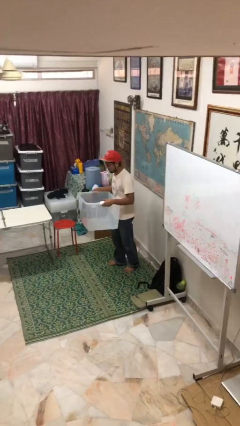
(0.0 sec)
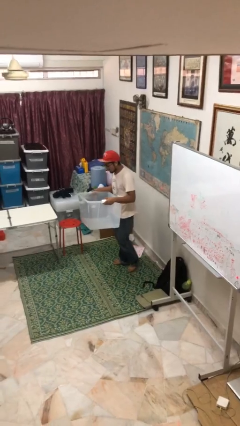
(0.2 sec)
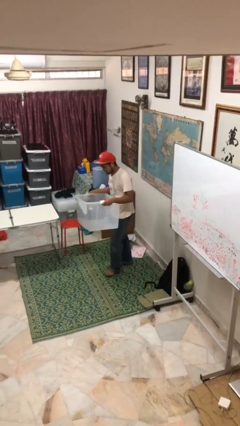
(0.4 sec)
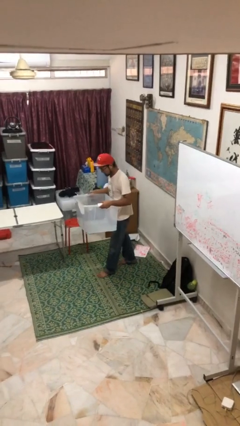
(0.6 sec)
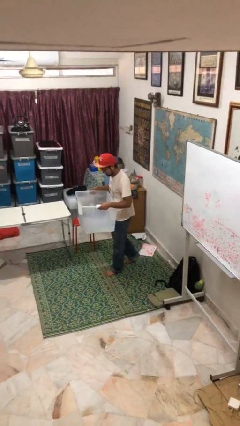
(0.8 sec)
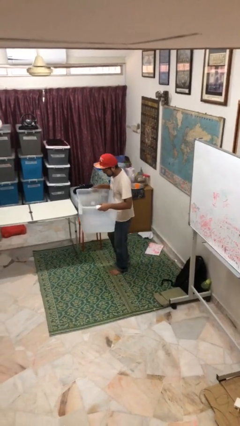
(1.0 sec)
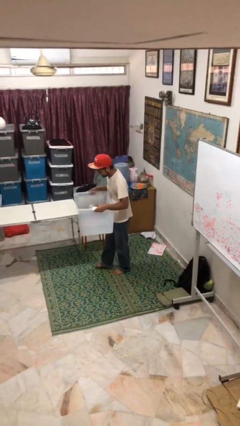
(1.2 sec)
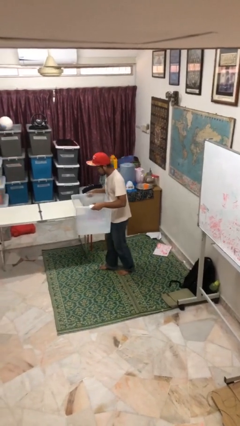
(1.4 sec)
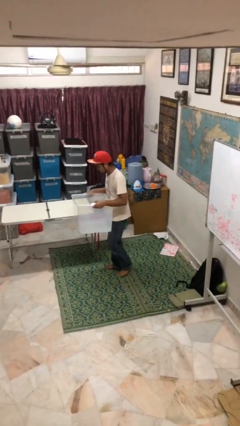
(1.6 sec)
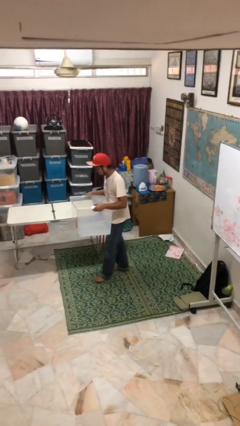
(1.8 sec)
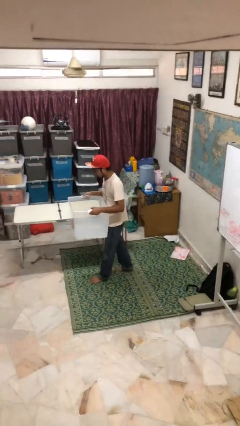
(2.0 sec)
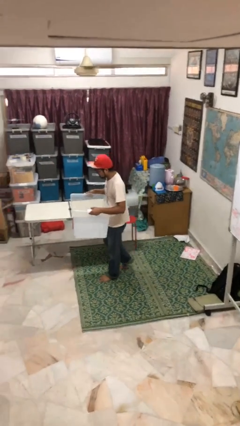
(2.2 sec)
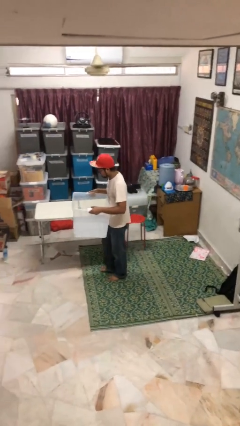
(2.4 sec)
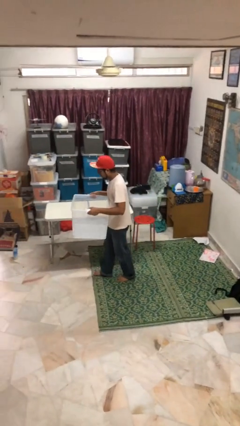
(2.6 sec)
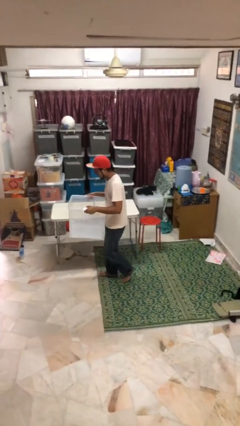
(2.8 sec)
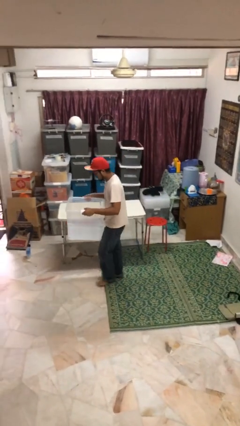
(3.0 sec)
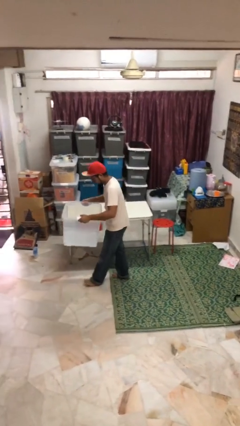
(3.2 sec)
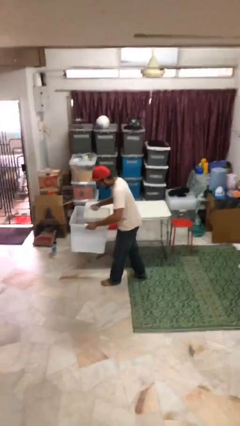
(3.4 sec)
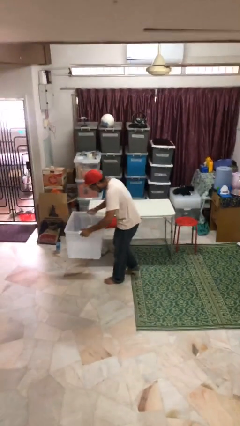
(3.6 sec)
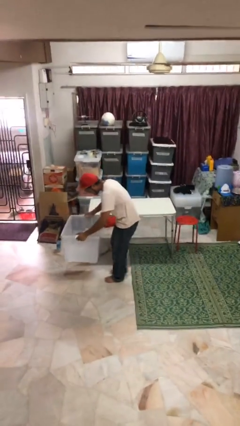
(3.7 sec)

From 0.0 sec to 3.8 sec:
person carries heavy object

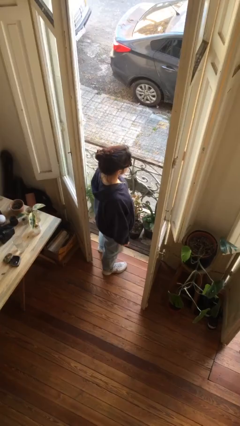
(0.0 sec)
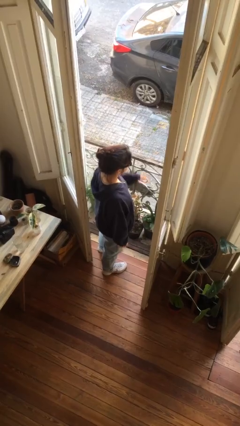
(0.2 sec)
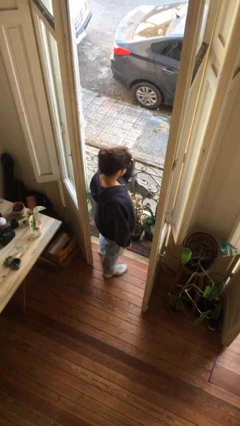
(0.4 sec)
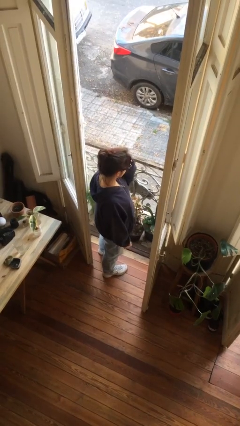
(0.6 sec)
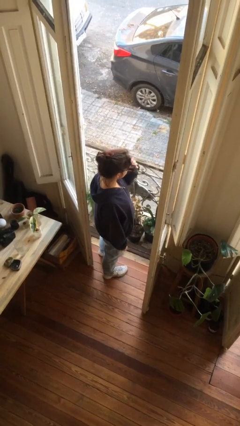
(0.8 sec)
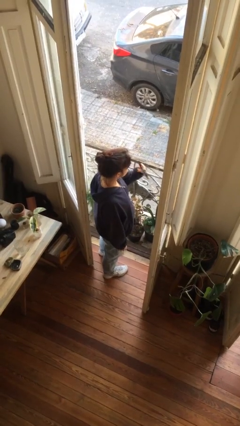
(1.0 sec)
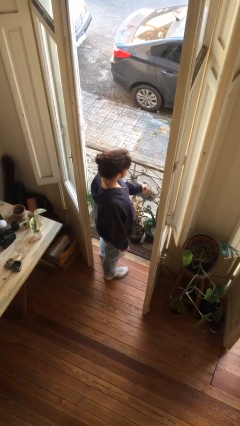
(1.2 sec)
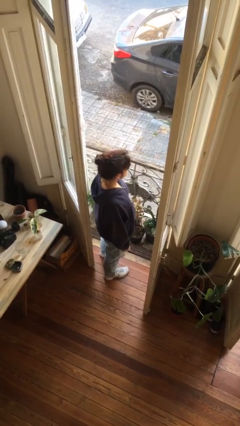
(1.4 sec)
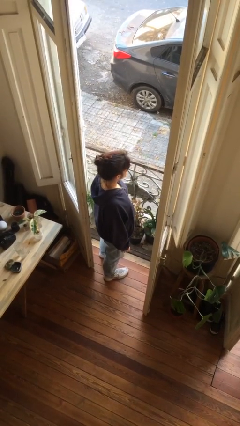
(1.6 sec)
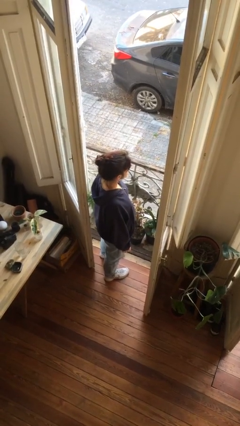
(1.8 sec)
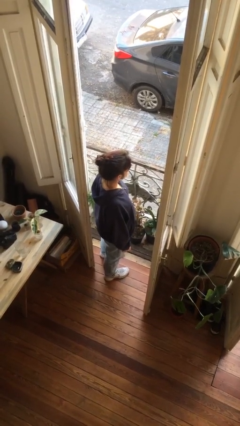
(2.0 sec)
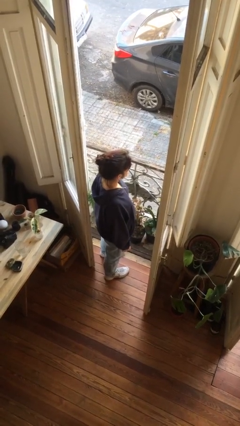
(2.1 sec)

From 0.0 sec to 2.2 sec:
person takes off sunglasses

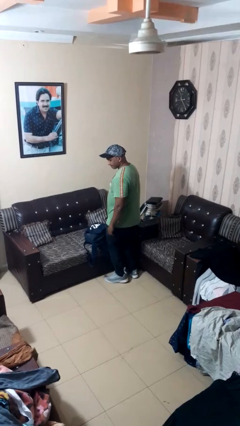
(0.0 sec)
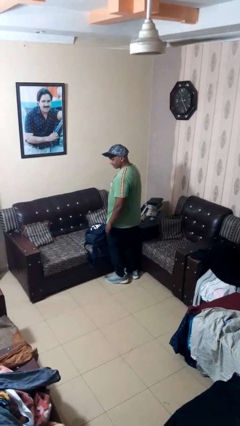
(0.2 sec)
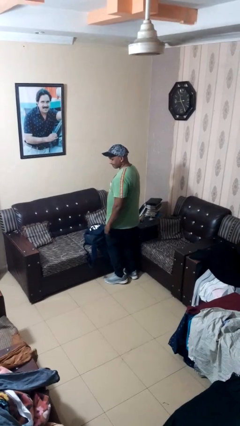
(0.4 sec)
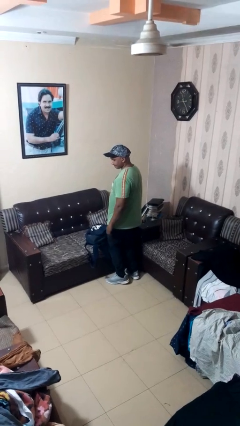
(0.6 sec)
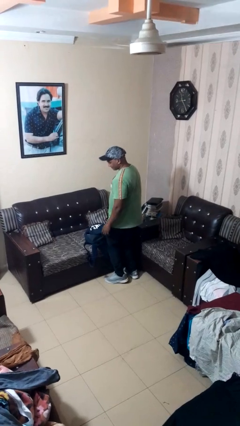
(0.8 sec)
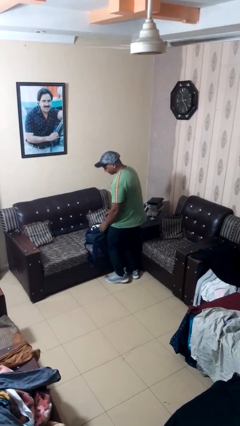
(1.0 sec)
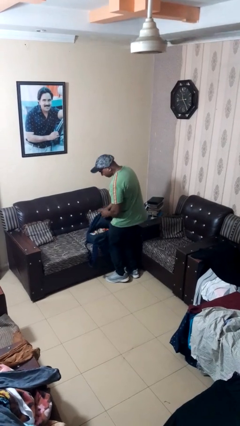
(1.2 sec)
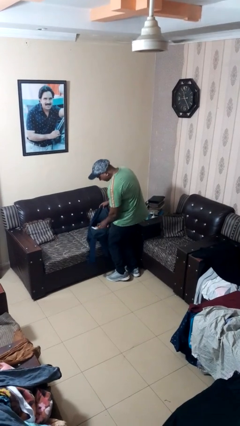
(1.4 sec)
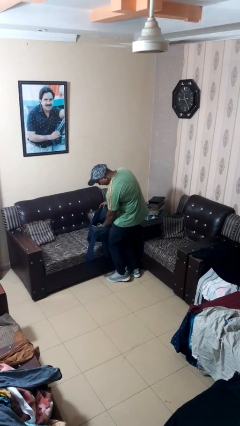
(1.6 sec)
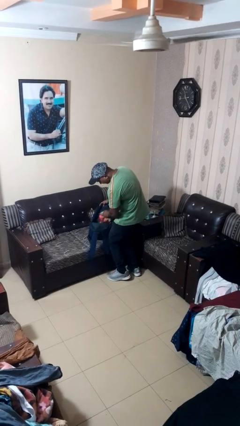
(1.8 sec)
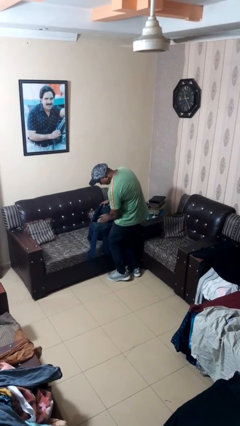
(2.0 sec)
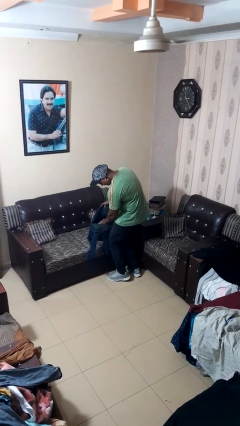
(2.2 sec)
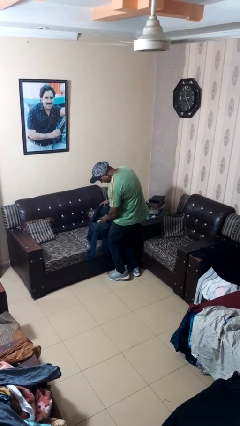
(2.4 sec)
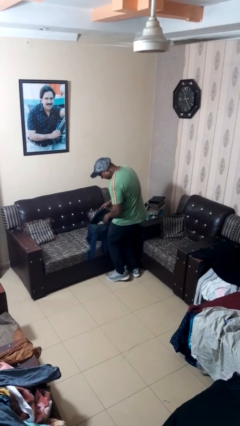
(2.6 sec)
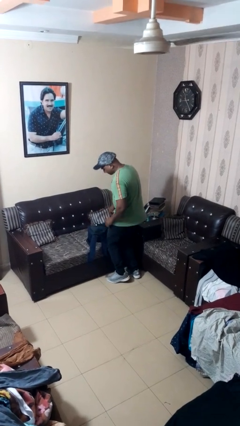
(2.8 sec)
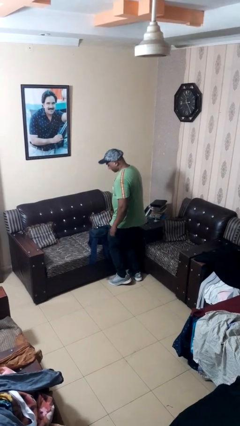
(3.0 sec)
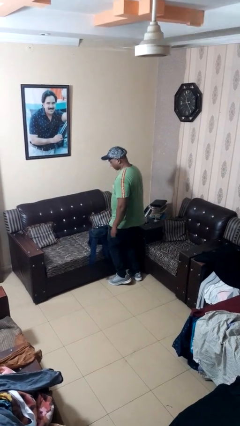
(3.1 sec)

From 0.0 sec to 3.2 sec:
person searches in bag

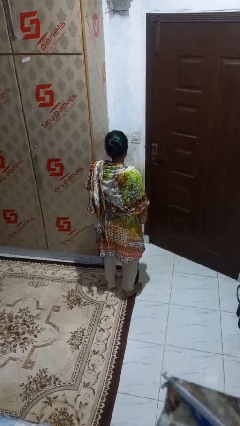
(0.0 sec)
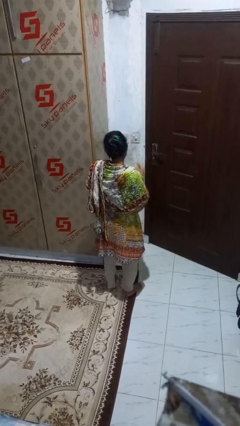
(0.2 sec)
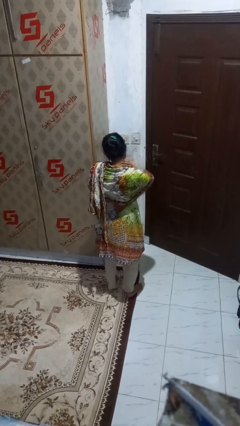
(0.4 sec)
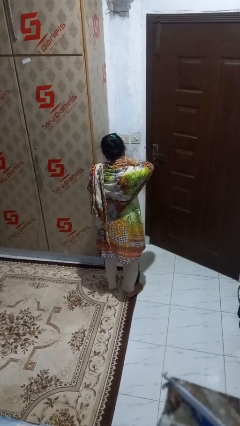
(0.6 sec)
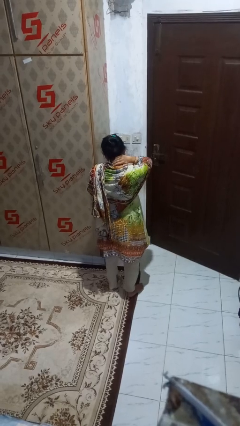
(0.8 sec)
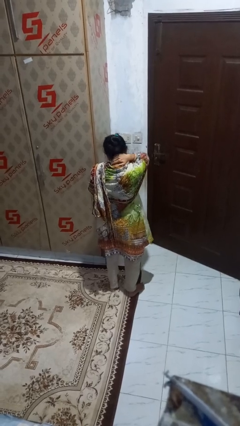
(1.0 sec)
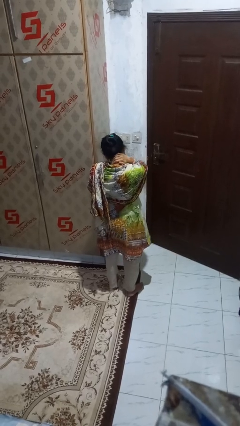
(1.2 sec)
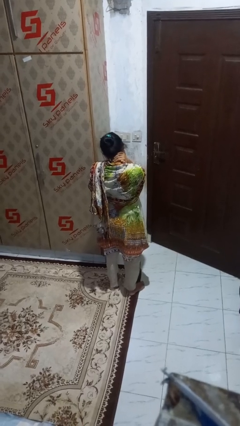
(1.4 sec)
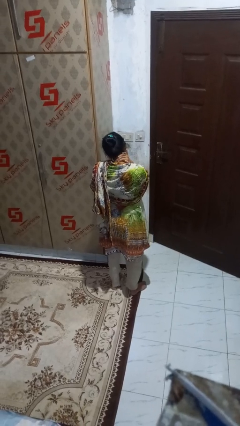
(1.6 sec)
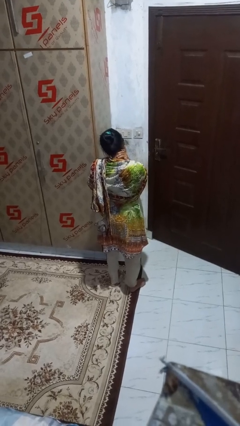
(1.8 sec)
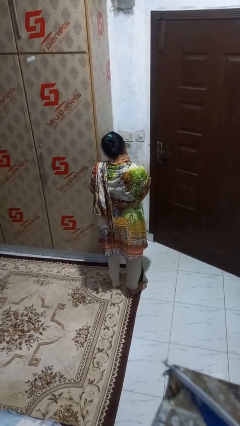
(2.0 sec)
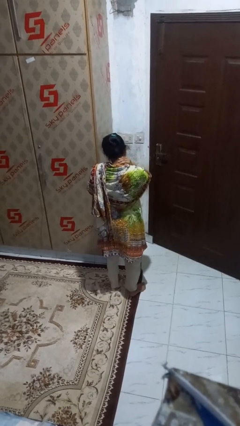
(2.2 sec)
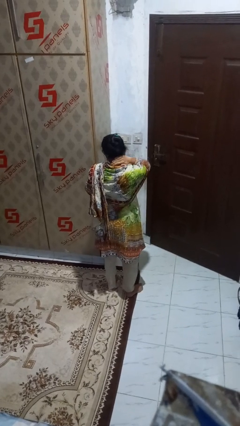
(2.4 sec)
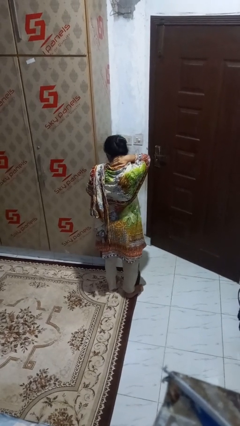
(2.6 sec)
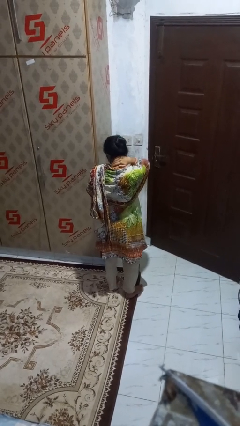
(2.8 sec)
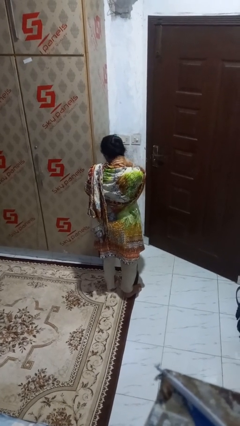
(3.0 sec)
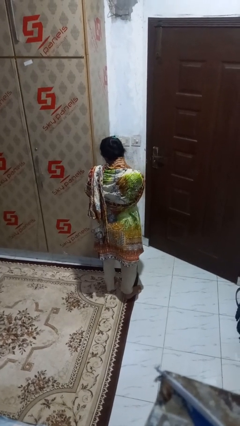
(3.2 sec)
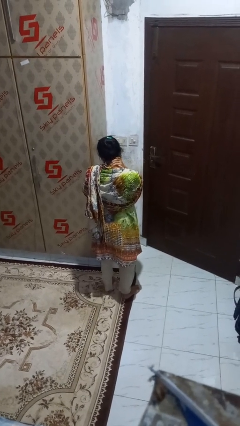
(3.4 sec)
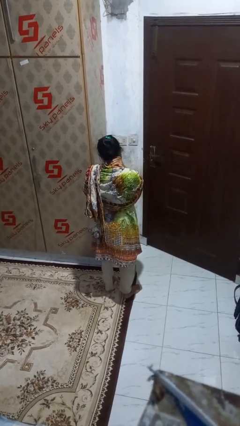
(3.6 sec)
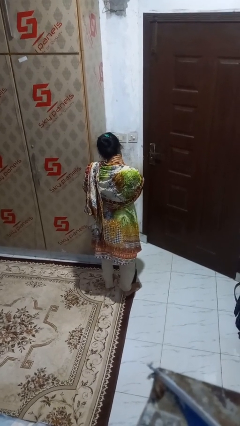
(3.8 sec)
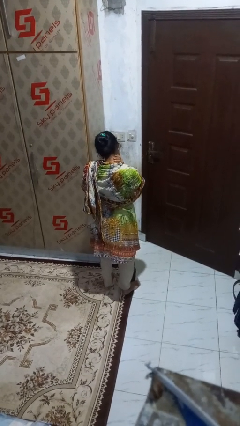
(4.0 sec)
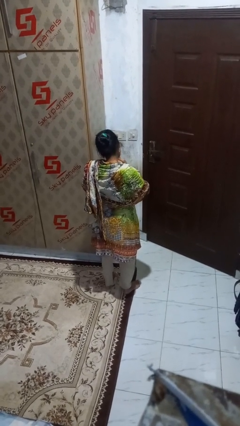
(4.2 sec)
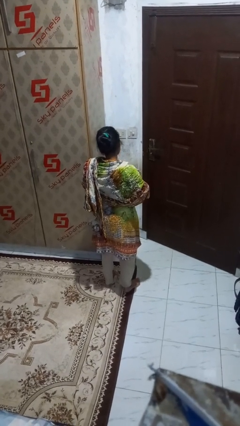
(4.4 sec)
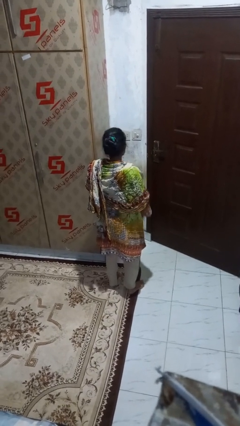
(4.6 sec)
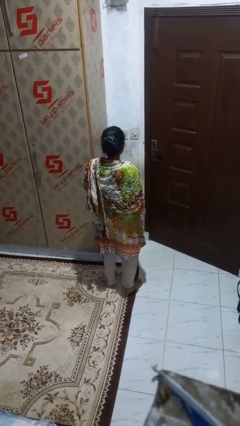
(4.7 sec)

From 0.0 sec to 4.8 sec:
person rubs neck

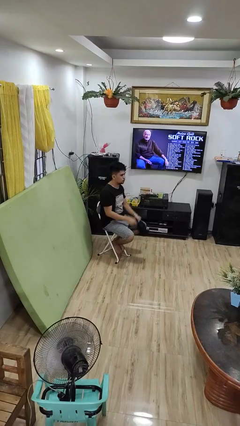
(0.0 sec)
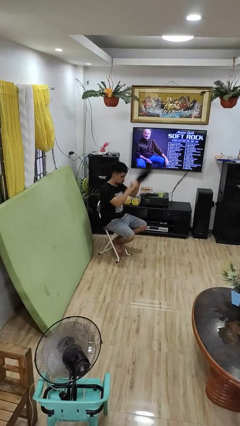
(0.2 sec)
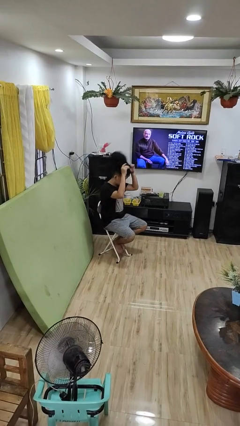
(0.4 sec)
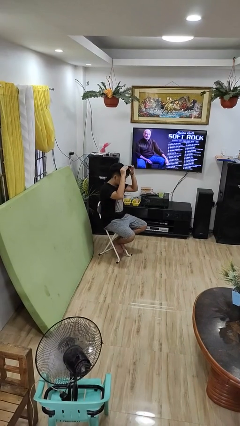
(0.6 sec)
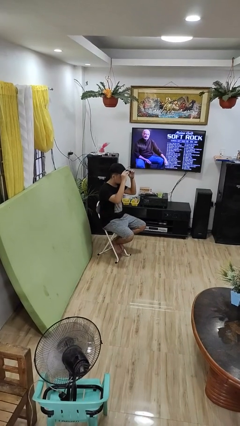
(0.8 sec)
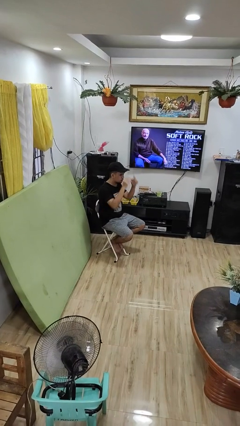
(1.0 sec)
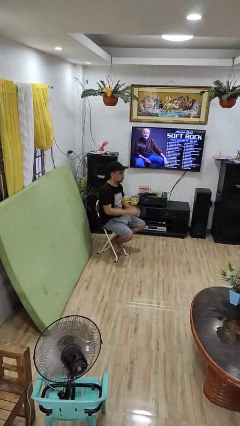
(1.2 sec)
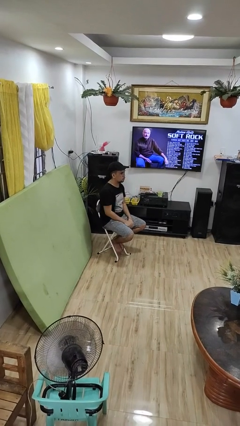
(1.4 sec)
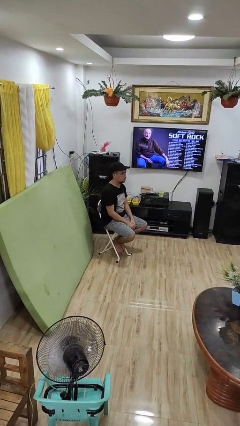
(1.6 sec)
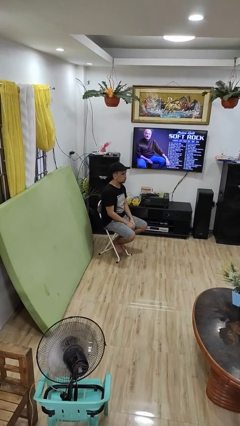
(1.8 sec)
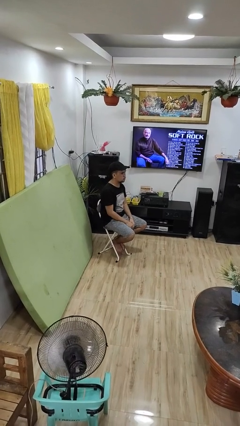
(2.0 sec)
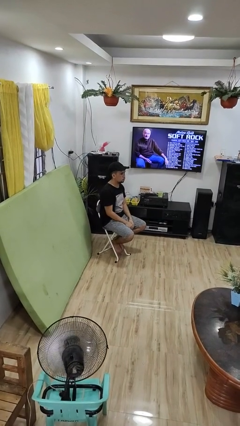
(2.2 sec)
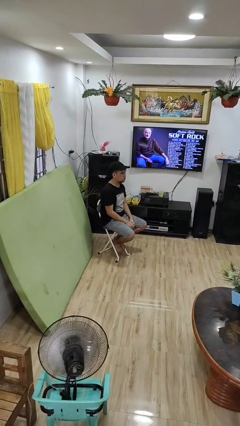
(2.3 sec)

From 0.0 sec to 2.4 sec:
person puts on hat

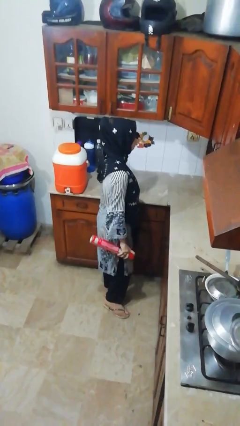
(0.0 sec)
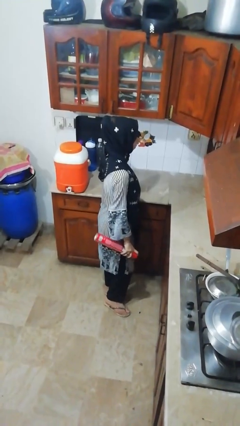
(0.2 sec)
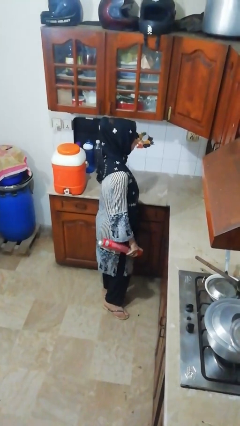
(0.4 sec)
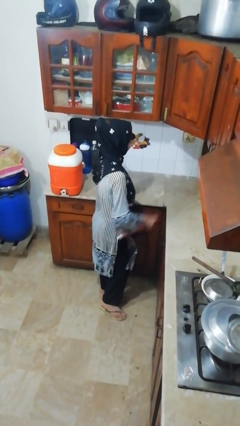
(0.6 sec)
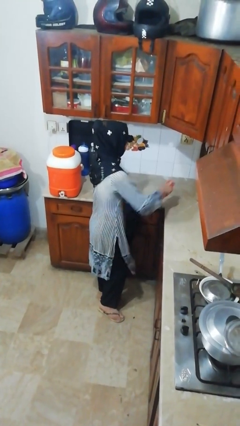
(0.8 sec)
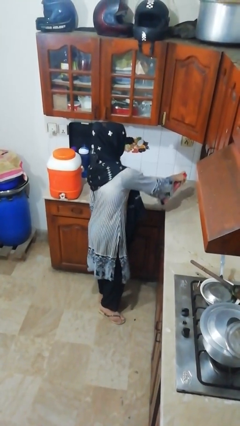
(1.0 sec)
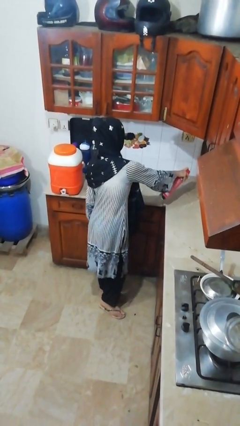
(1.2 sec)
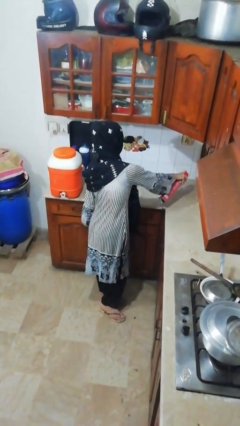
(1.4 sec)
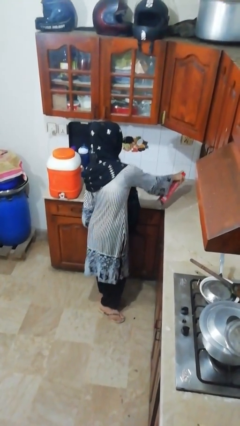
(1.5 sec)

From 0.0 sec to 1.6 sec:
person sprays from bottle
